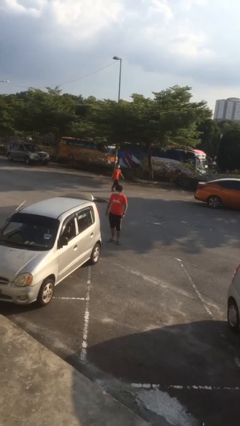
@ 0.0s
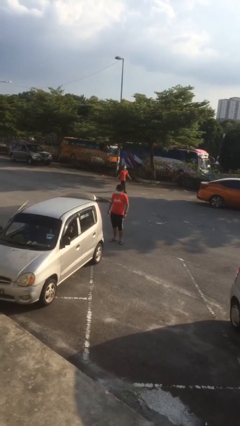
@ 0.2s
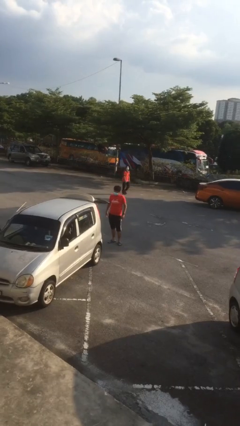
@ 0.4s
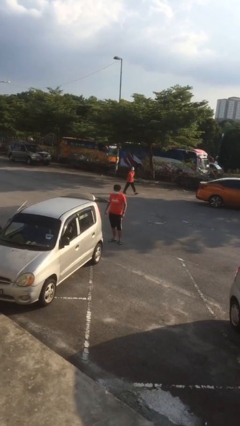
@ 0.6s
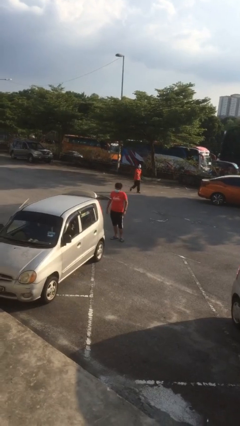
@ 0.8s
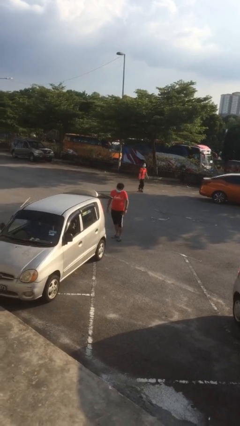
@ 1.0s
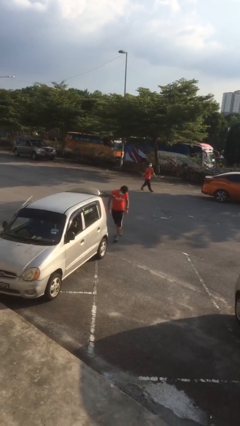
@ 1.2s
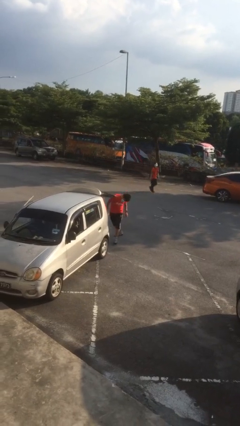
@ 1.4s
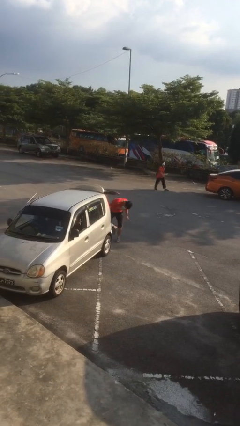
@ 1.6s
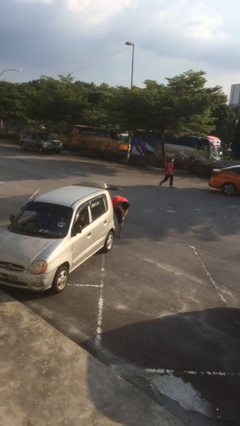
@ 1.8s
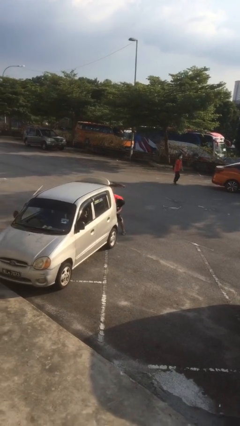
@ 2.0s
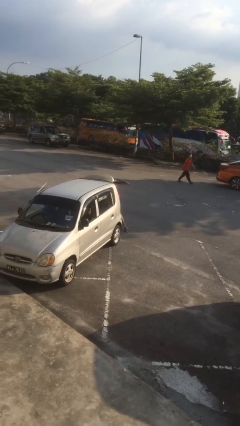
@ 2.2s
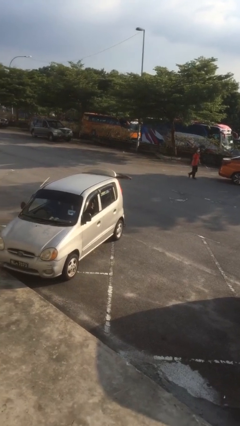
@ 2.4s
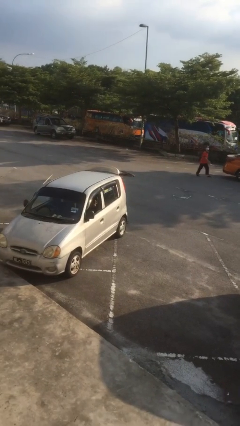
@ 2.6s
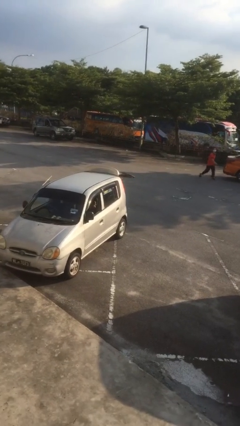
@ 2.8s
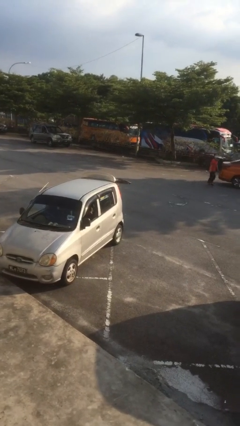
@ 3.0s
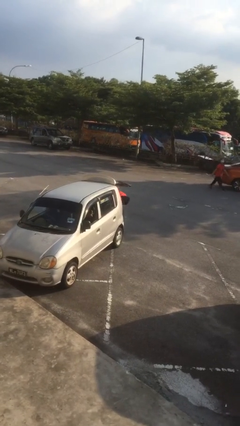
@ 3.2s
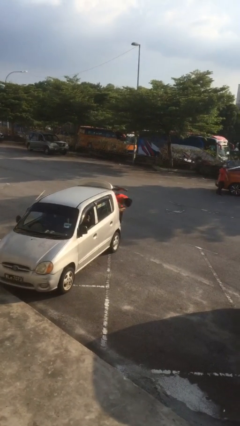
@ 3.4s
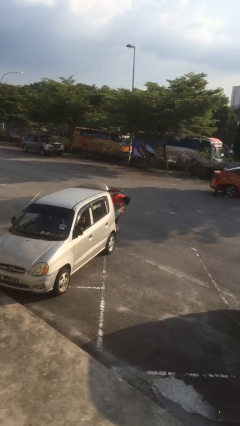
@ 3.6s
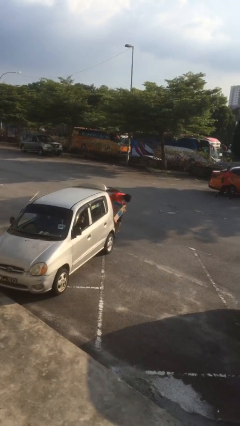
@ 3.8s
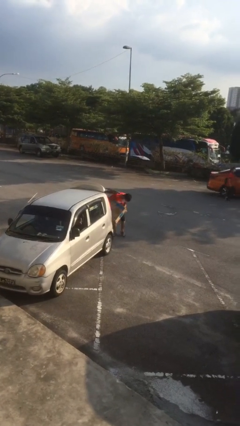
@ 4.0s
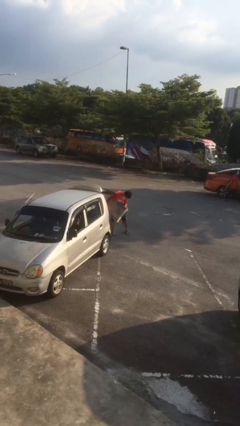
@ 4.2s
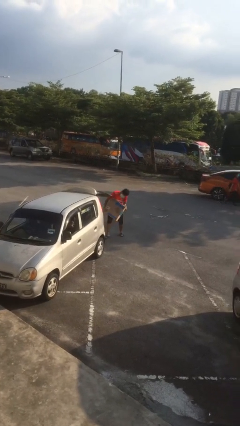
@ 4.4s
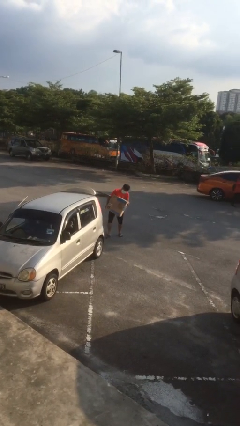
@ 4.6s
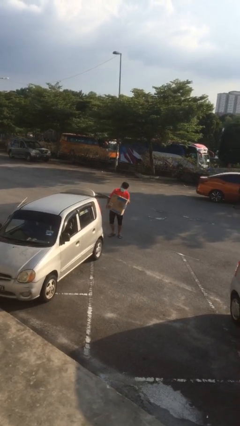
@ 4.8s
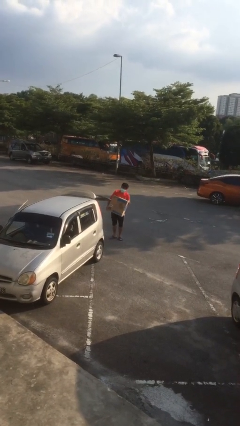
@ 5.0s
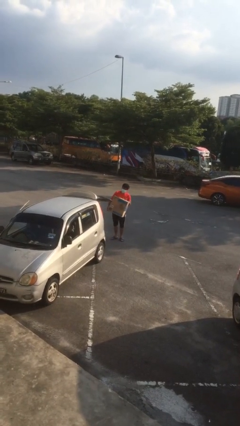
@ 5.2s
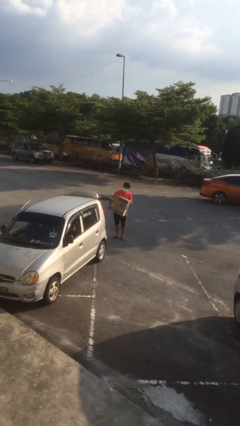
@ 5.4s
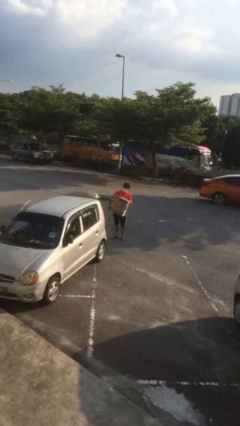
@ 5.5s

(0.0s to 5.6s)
person unloads car

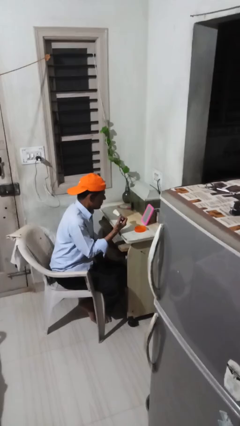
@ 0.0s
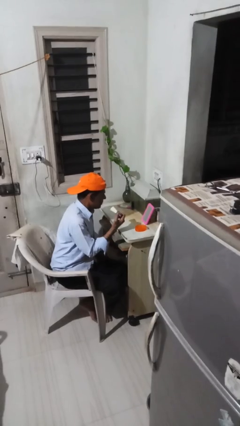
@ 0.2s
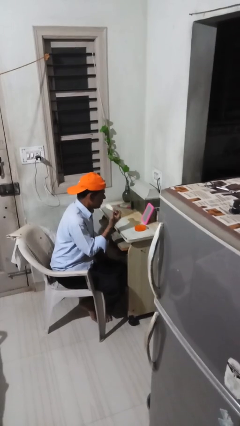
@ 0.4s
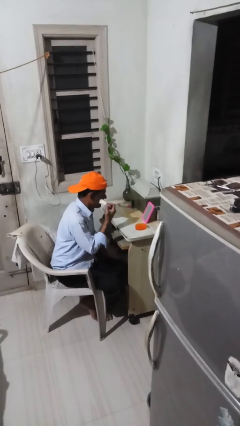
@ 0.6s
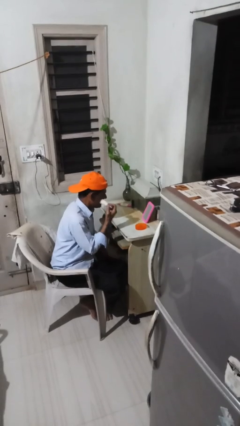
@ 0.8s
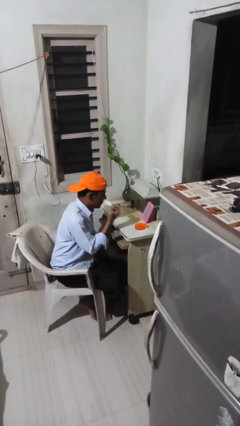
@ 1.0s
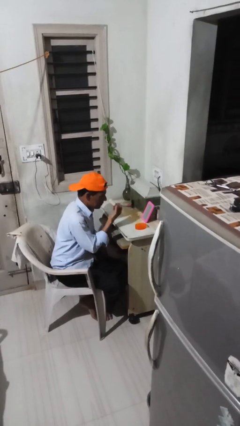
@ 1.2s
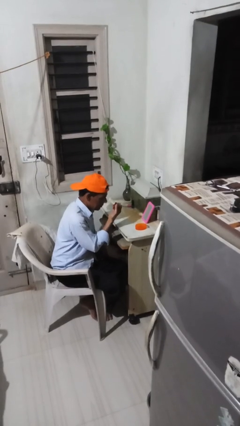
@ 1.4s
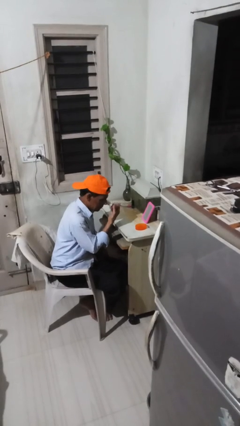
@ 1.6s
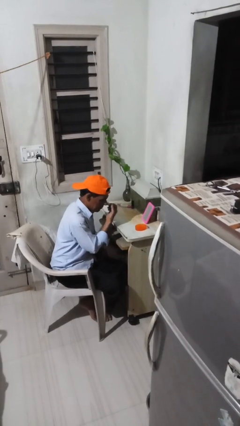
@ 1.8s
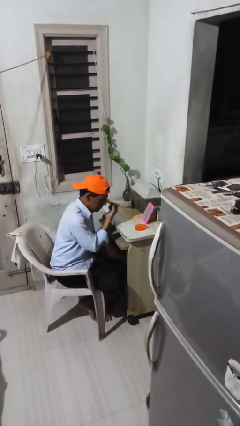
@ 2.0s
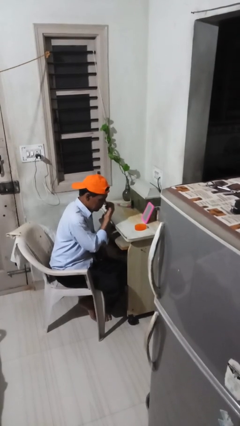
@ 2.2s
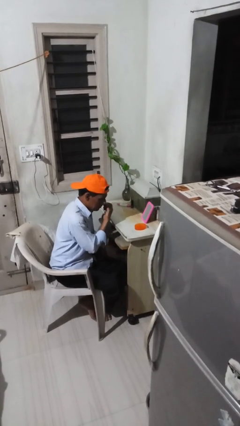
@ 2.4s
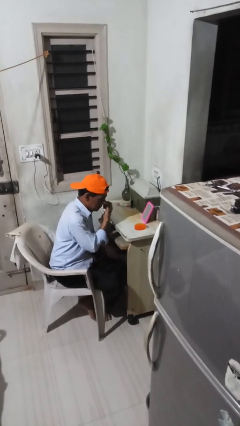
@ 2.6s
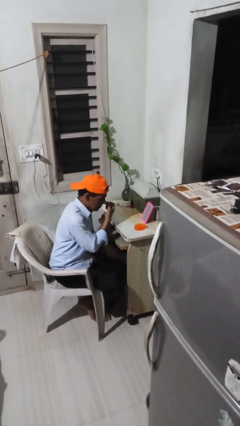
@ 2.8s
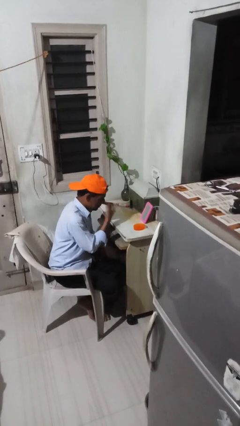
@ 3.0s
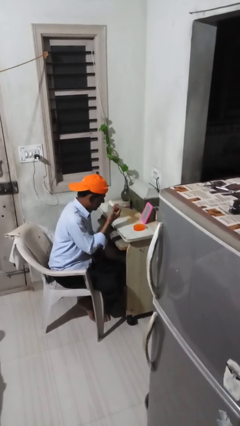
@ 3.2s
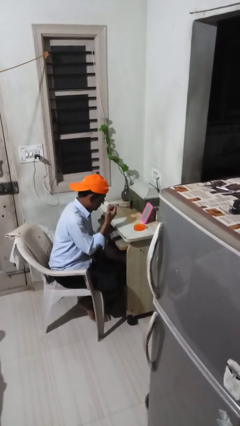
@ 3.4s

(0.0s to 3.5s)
person applies foundation makeup

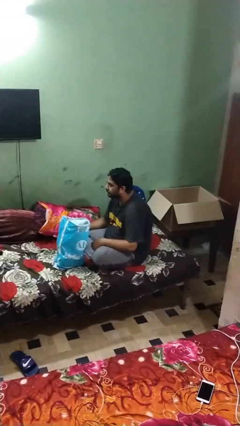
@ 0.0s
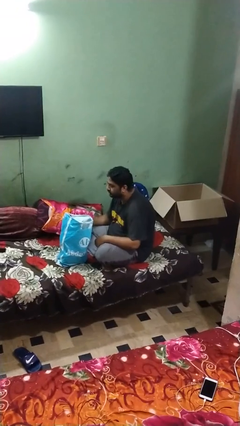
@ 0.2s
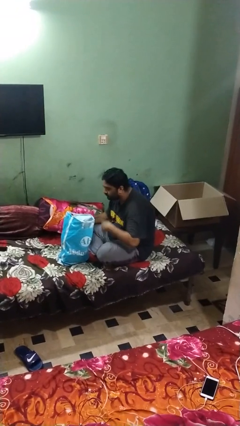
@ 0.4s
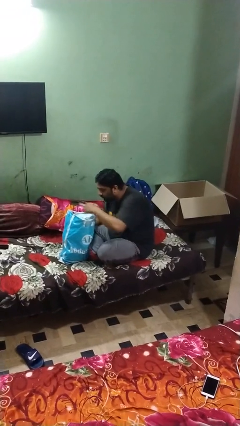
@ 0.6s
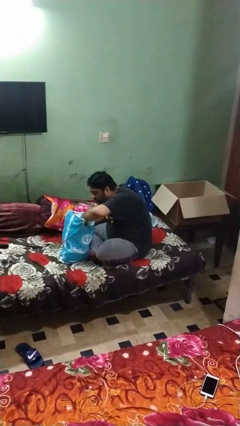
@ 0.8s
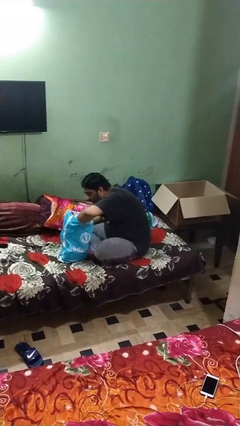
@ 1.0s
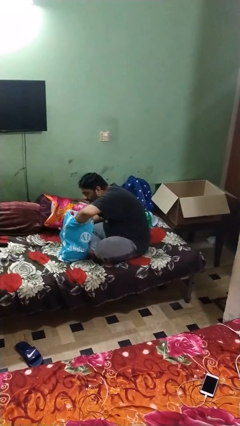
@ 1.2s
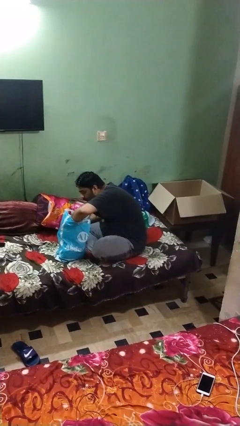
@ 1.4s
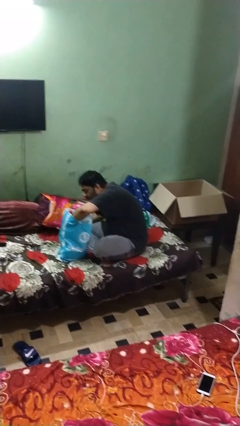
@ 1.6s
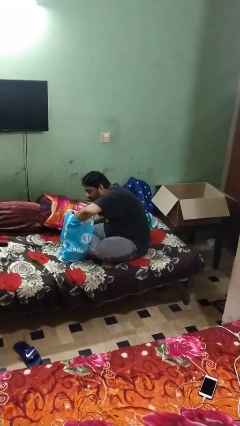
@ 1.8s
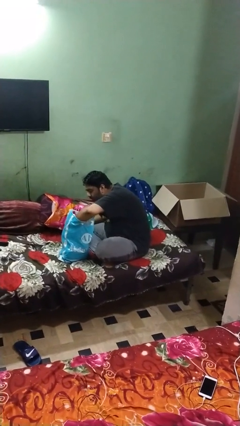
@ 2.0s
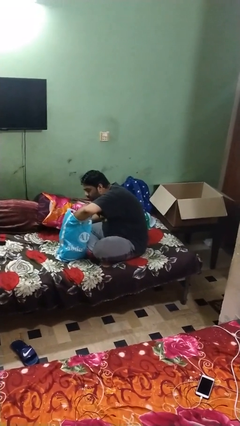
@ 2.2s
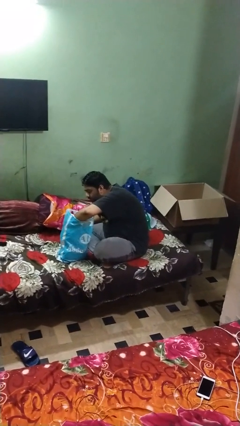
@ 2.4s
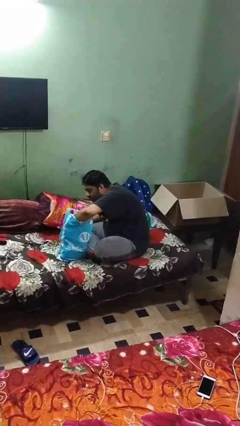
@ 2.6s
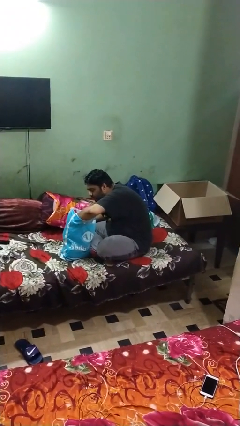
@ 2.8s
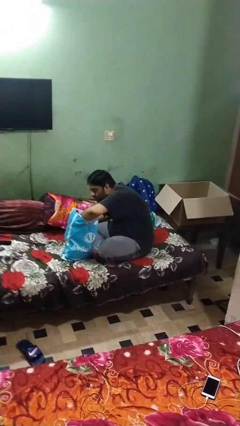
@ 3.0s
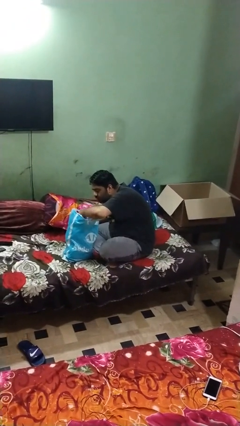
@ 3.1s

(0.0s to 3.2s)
person searches in bag

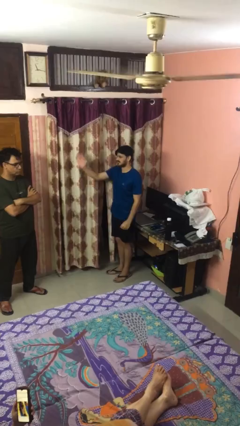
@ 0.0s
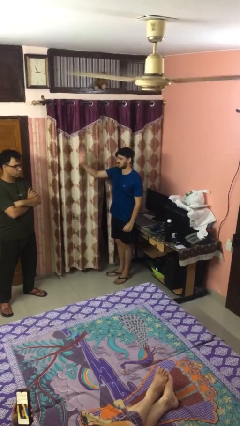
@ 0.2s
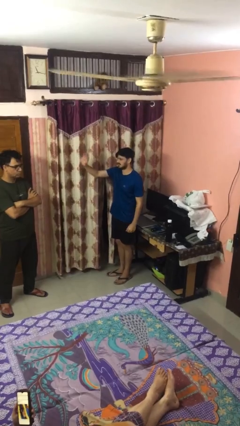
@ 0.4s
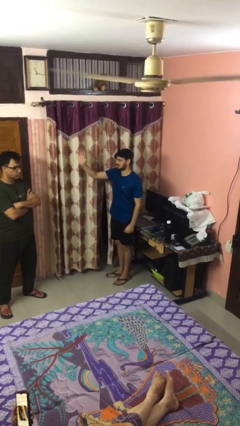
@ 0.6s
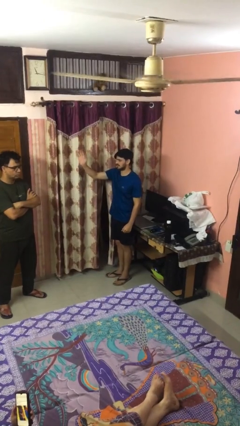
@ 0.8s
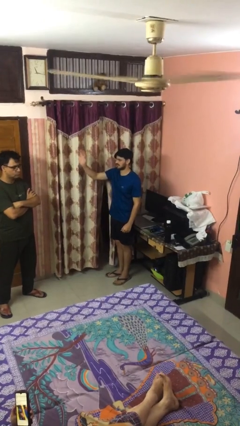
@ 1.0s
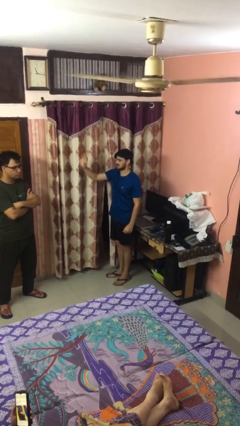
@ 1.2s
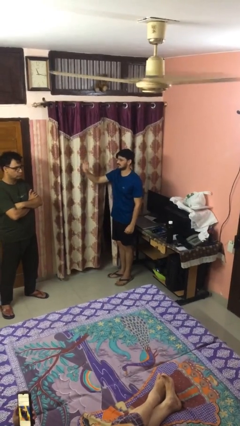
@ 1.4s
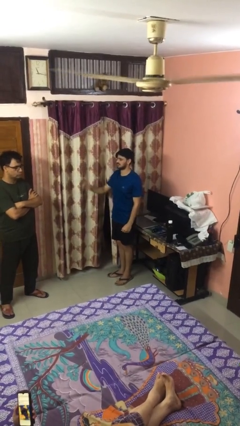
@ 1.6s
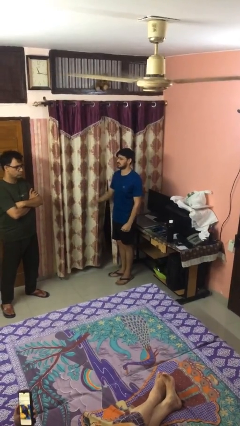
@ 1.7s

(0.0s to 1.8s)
person waves at person

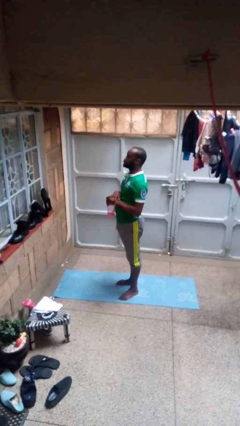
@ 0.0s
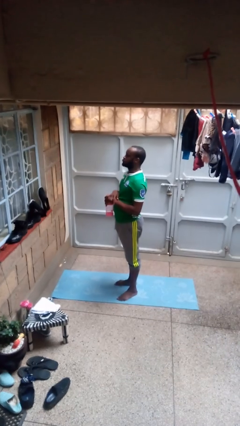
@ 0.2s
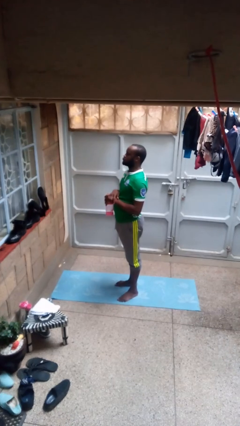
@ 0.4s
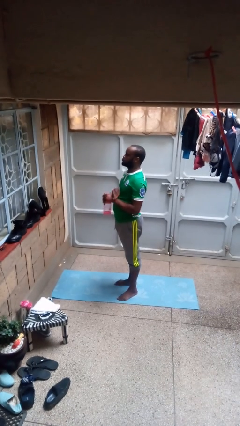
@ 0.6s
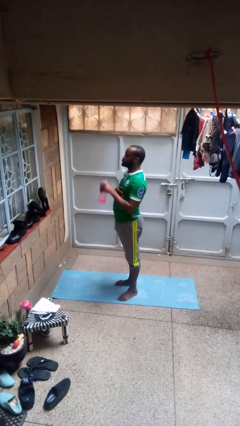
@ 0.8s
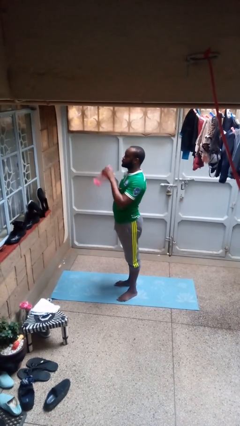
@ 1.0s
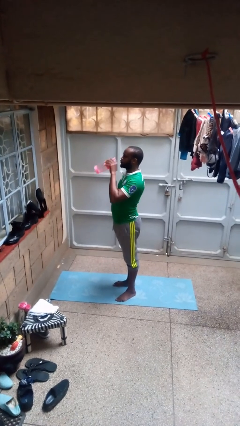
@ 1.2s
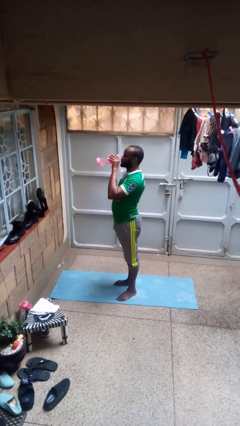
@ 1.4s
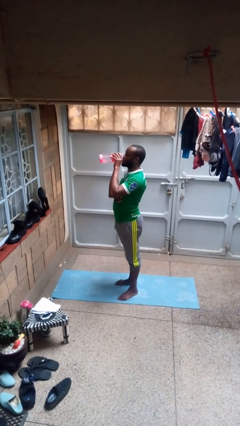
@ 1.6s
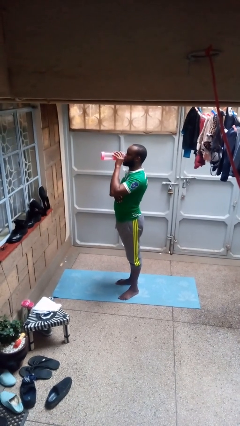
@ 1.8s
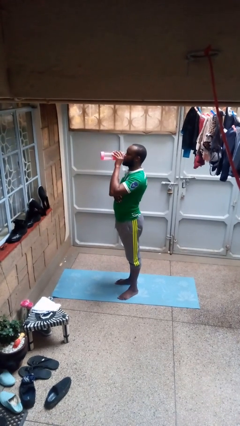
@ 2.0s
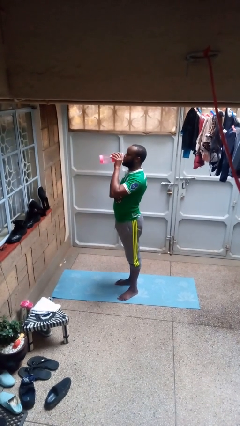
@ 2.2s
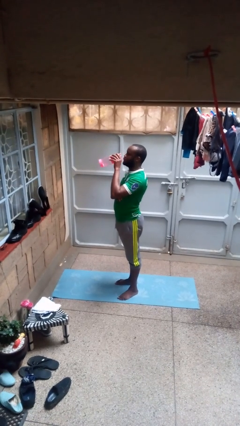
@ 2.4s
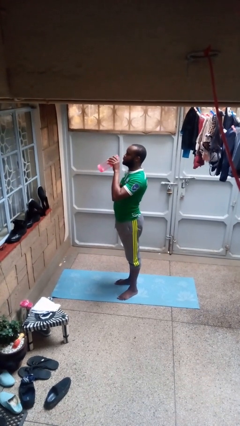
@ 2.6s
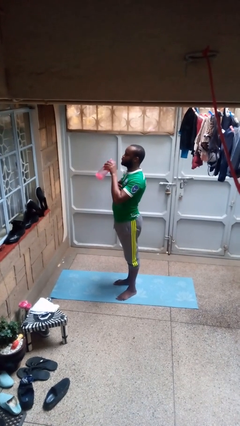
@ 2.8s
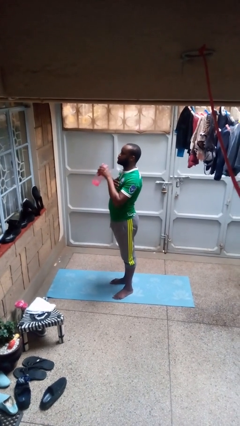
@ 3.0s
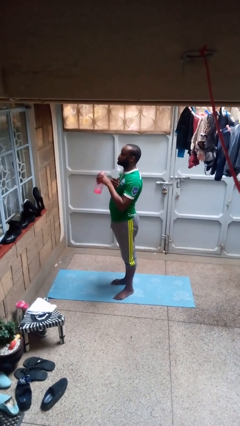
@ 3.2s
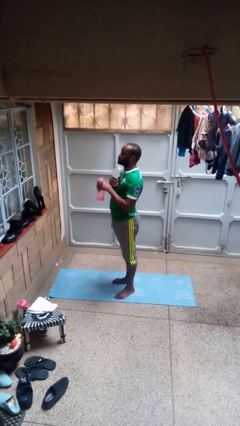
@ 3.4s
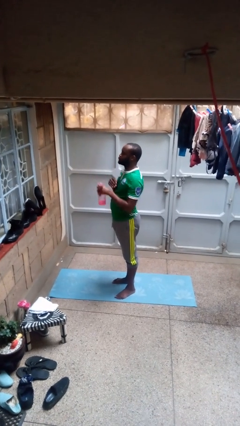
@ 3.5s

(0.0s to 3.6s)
person drinks from bottle
